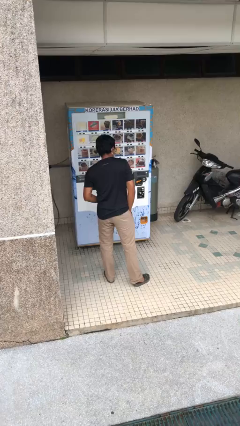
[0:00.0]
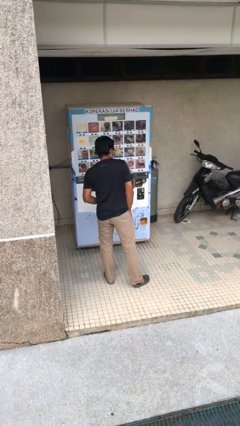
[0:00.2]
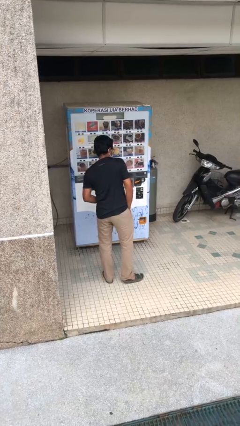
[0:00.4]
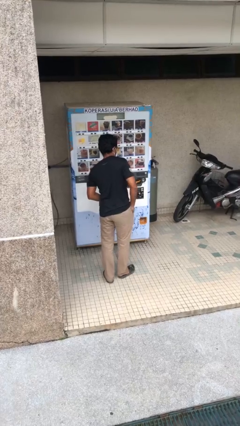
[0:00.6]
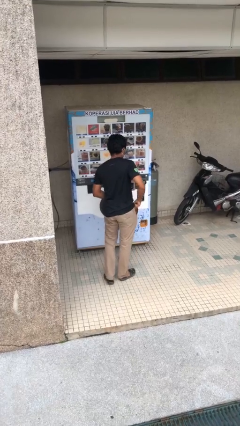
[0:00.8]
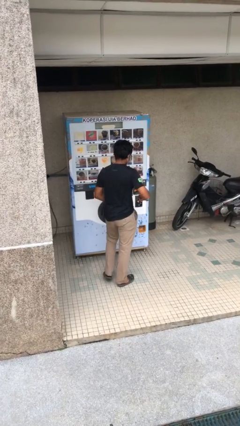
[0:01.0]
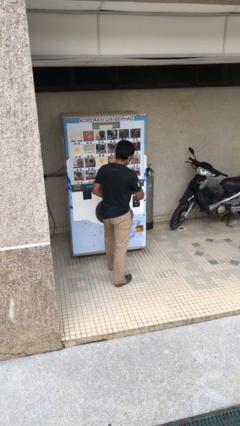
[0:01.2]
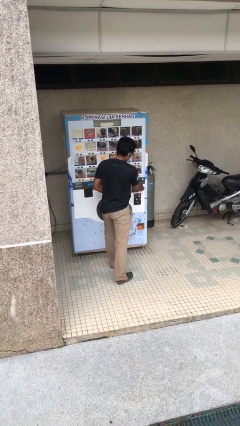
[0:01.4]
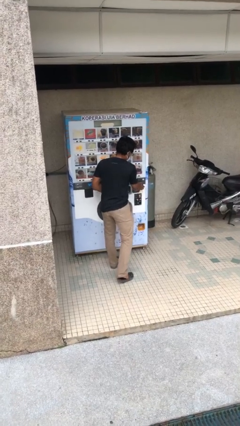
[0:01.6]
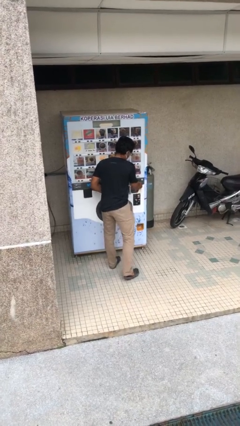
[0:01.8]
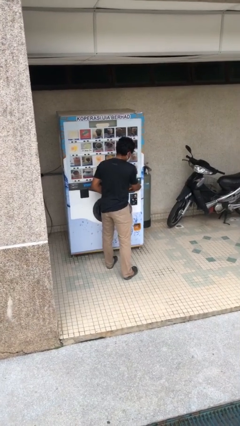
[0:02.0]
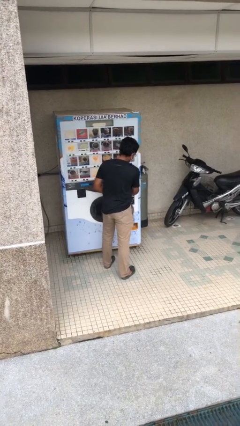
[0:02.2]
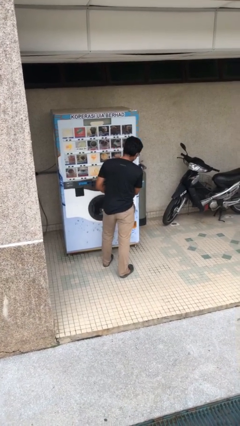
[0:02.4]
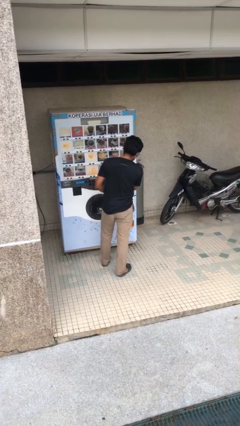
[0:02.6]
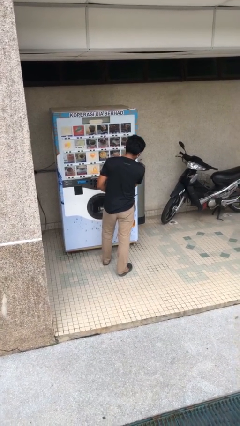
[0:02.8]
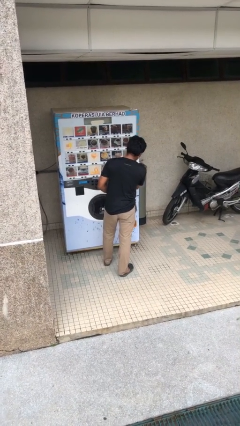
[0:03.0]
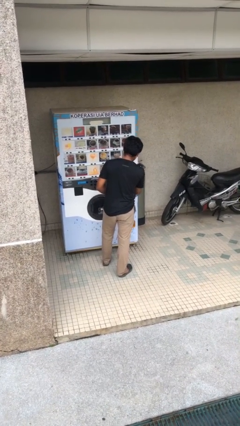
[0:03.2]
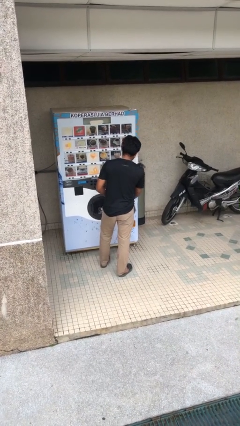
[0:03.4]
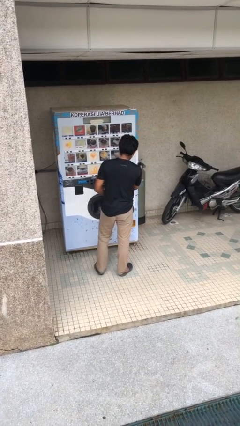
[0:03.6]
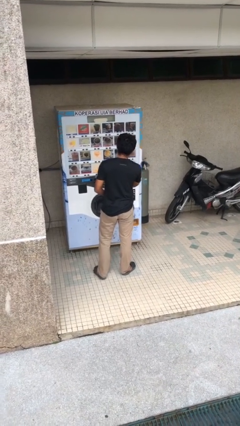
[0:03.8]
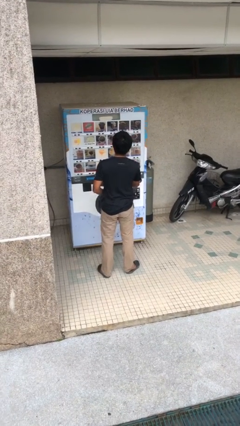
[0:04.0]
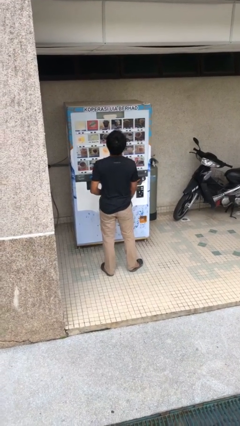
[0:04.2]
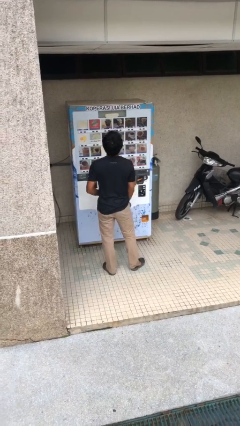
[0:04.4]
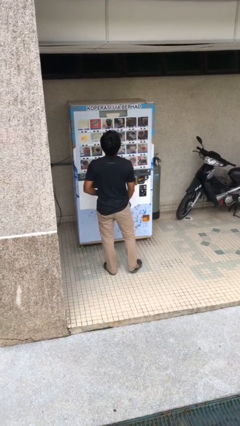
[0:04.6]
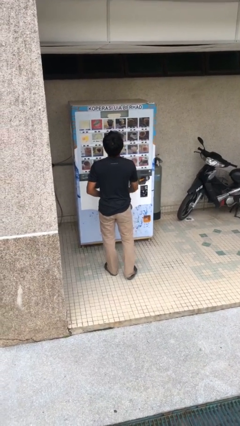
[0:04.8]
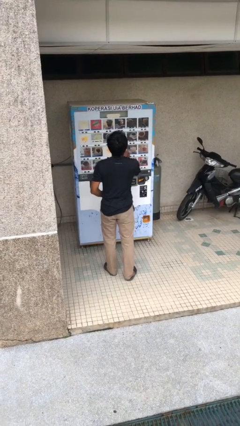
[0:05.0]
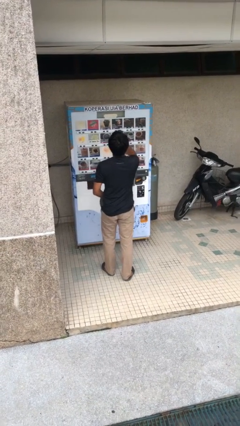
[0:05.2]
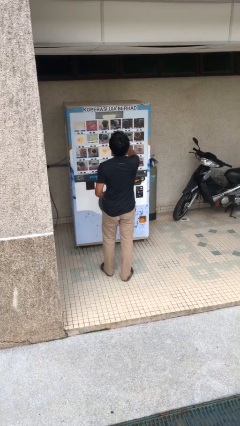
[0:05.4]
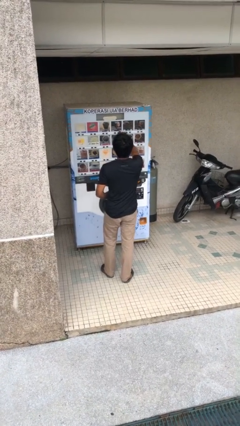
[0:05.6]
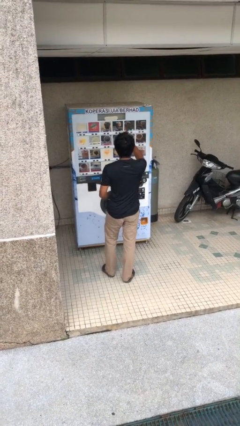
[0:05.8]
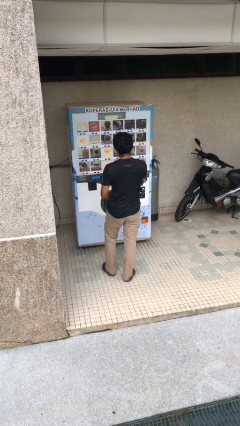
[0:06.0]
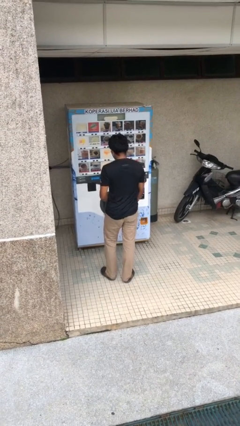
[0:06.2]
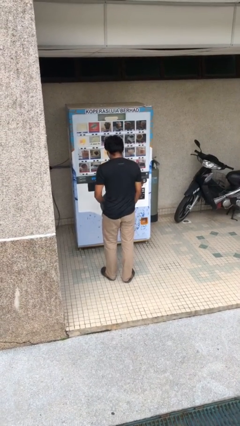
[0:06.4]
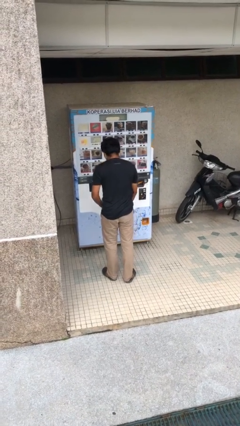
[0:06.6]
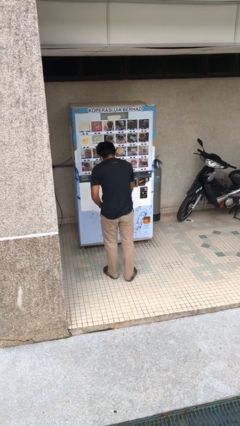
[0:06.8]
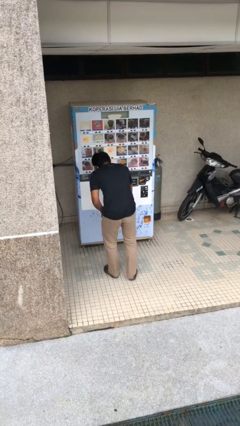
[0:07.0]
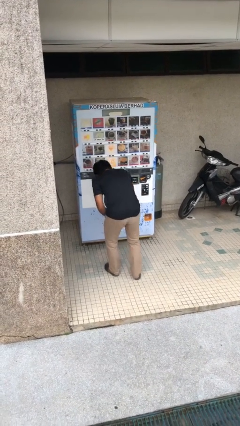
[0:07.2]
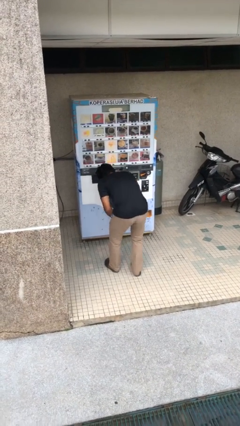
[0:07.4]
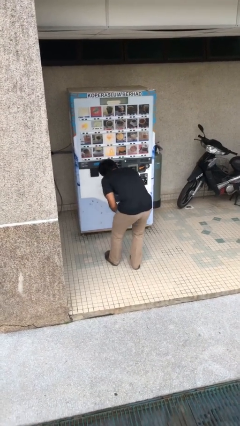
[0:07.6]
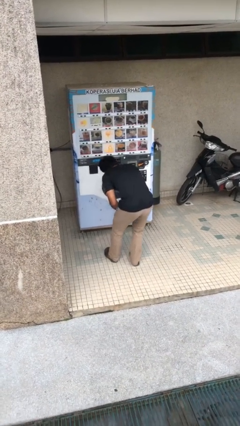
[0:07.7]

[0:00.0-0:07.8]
person purchases from machine

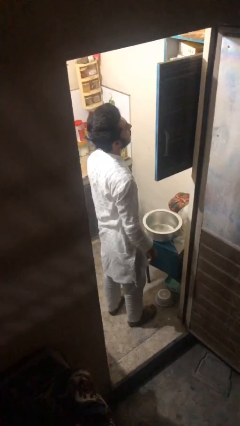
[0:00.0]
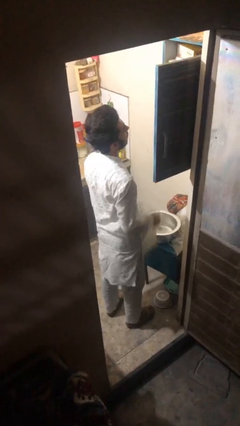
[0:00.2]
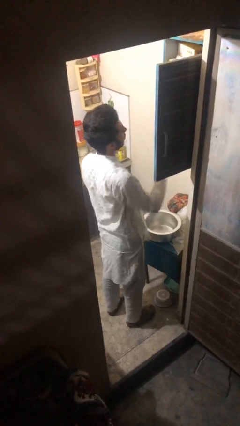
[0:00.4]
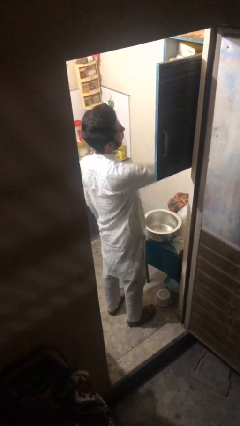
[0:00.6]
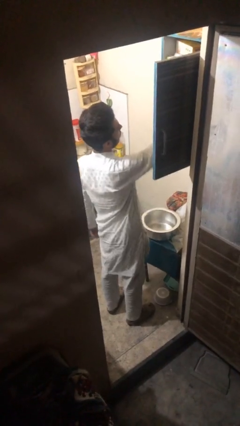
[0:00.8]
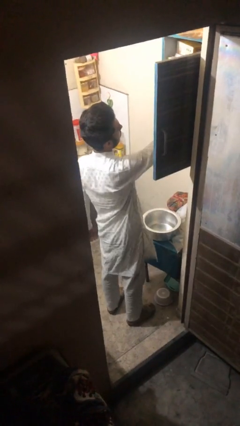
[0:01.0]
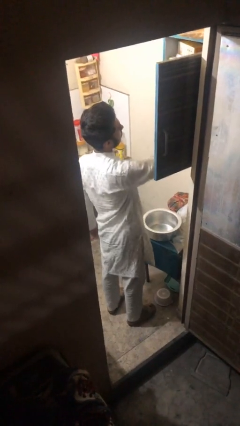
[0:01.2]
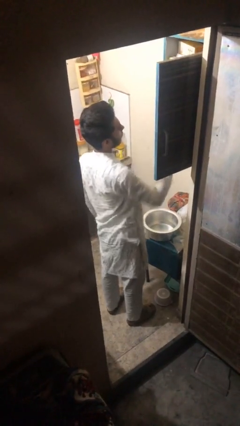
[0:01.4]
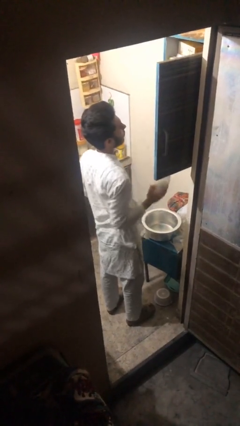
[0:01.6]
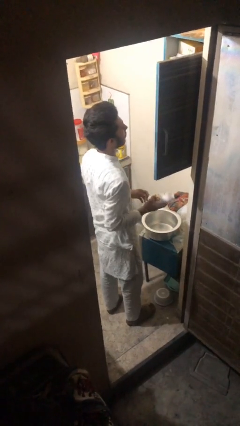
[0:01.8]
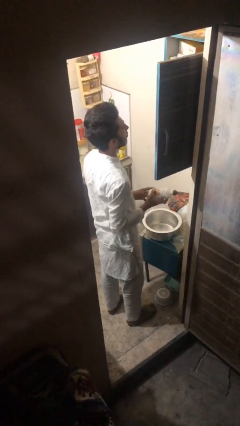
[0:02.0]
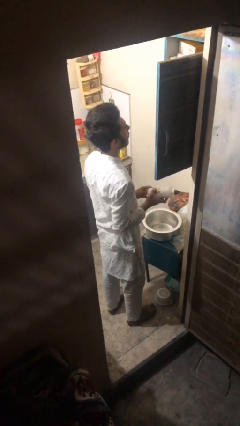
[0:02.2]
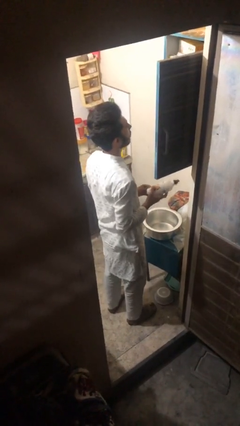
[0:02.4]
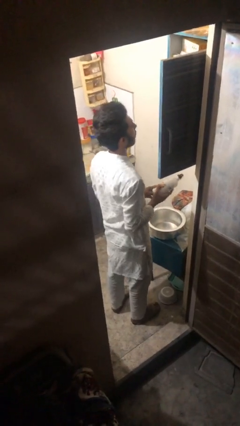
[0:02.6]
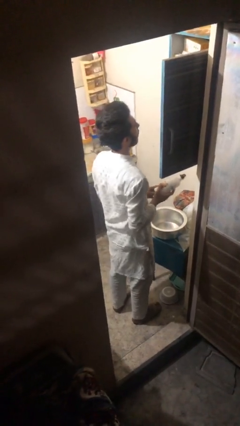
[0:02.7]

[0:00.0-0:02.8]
person takes object from cabinet

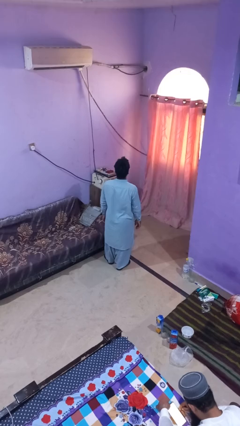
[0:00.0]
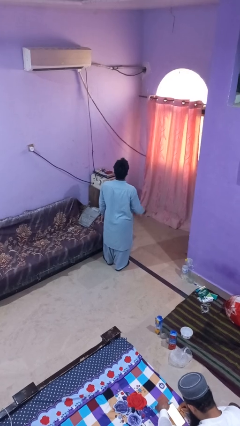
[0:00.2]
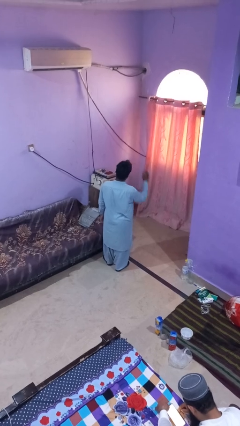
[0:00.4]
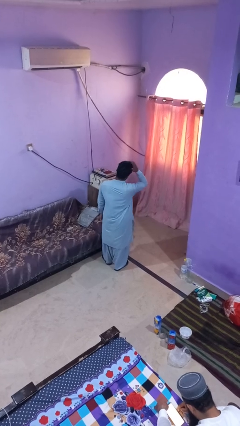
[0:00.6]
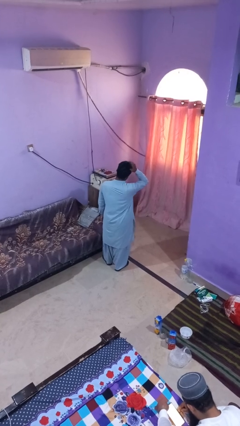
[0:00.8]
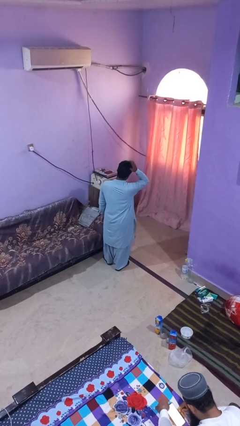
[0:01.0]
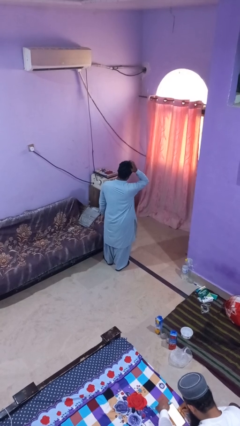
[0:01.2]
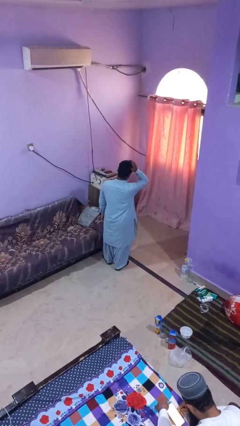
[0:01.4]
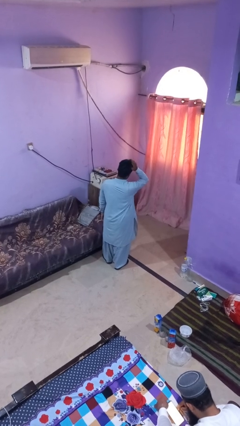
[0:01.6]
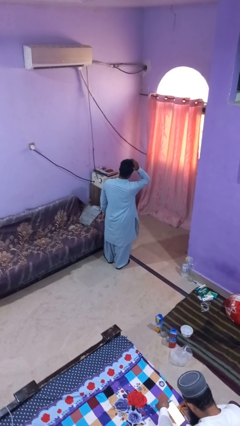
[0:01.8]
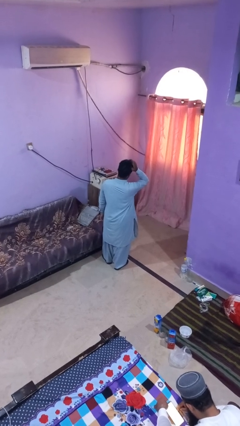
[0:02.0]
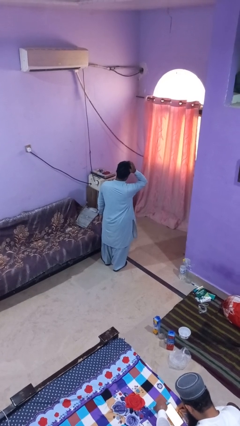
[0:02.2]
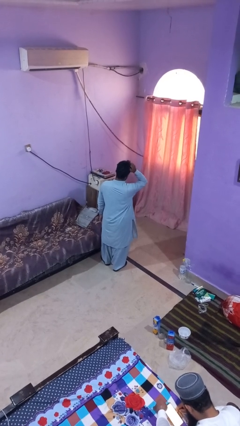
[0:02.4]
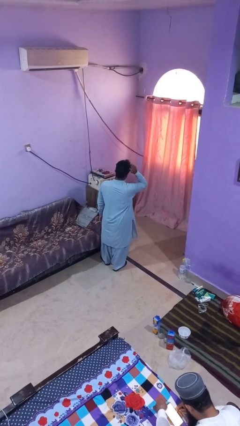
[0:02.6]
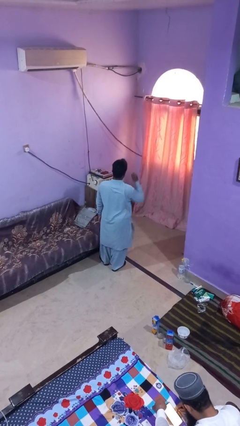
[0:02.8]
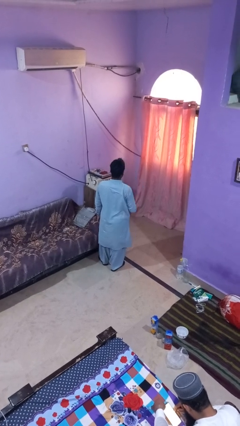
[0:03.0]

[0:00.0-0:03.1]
person scratches face

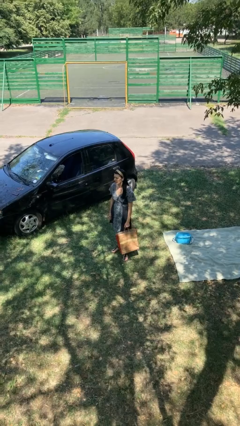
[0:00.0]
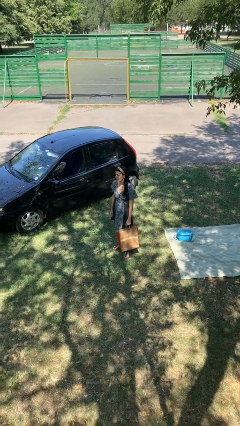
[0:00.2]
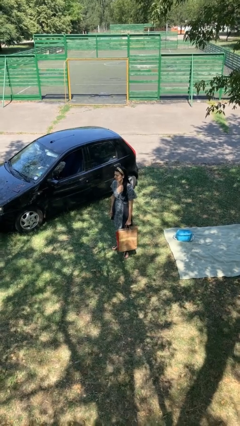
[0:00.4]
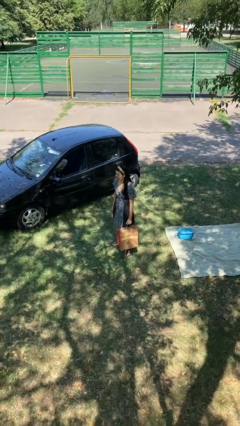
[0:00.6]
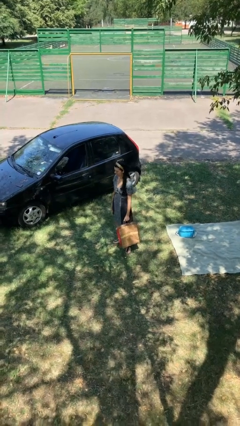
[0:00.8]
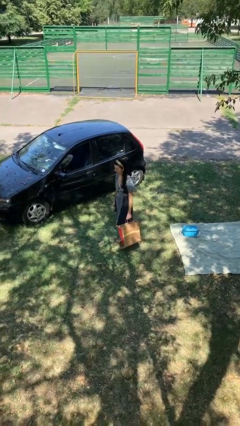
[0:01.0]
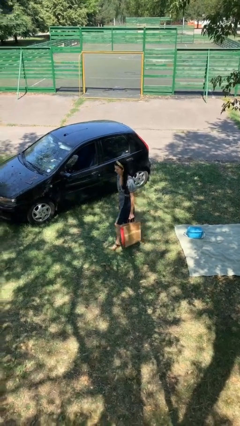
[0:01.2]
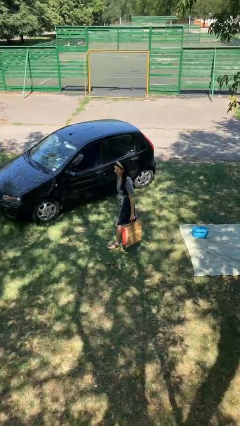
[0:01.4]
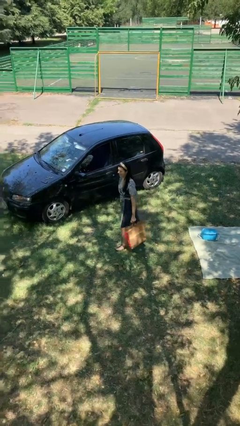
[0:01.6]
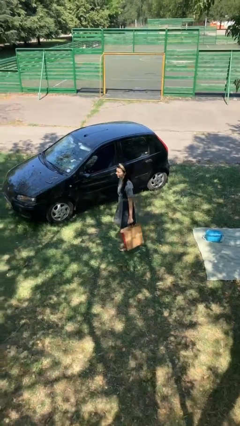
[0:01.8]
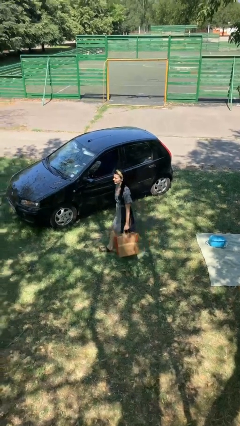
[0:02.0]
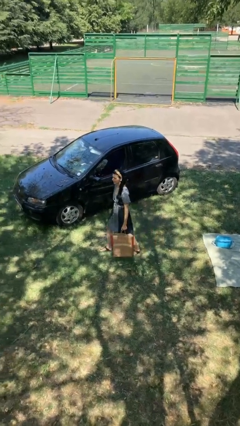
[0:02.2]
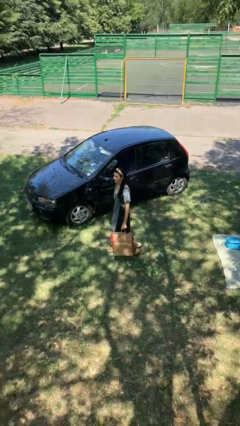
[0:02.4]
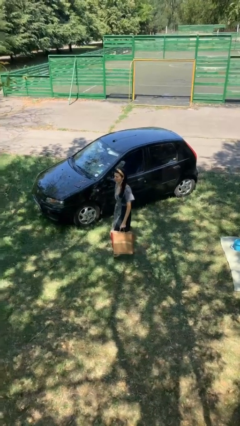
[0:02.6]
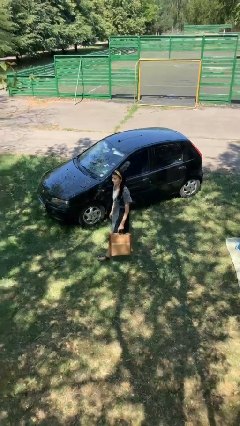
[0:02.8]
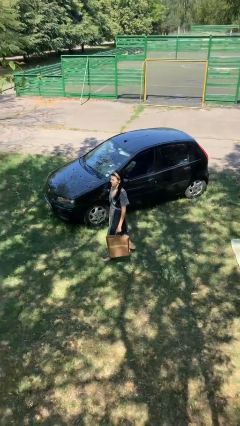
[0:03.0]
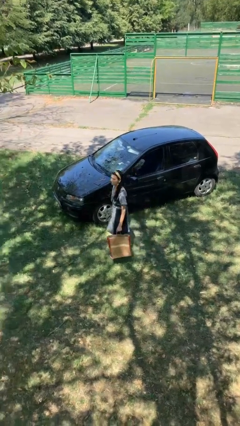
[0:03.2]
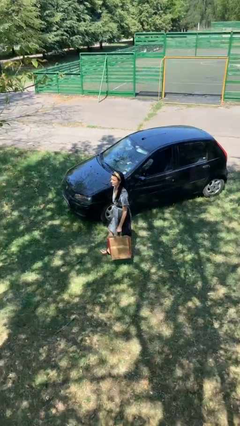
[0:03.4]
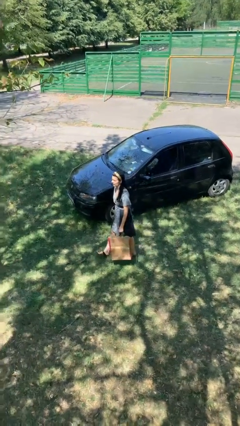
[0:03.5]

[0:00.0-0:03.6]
person carries groceries

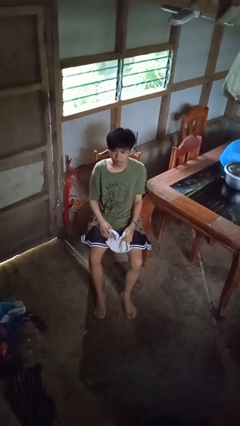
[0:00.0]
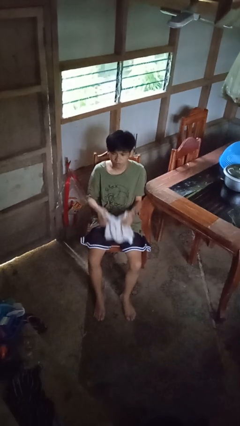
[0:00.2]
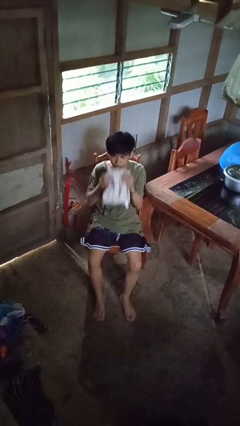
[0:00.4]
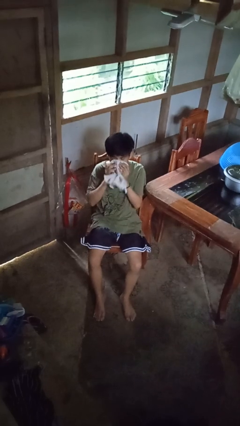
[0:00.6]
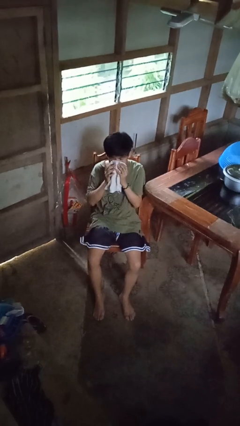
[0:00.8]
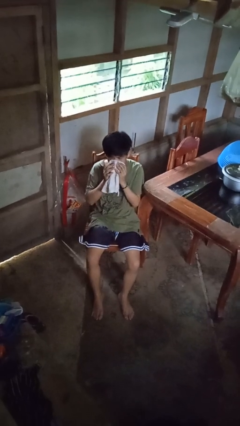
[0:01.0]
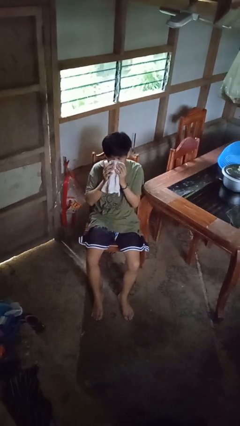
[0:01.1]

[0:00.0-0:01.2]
person blows nose
